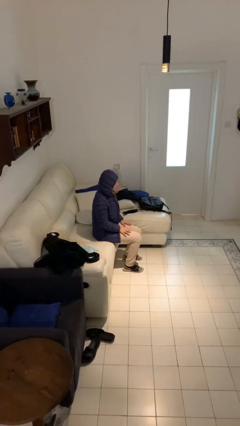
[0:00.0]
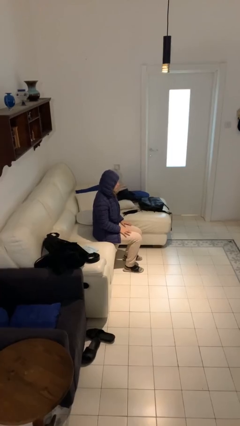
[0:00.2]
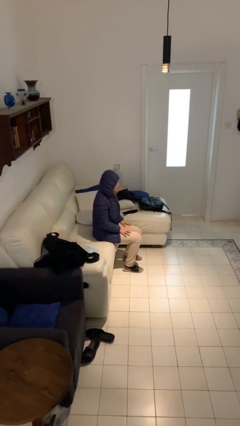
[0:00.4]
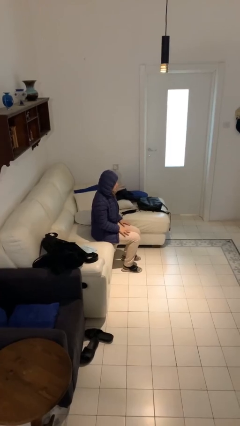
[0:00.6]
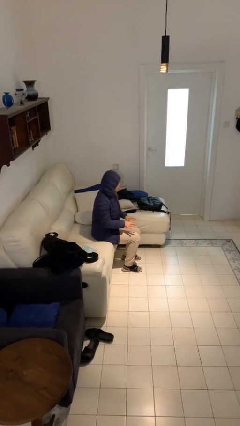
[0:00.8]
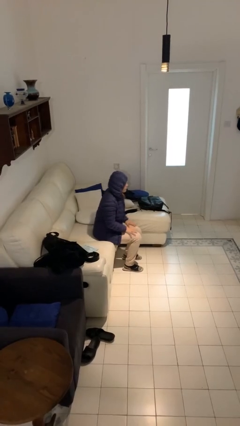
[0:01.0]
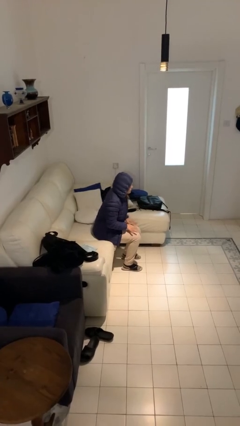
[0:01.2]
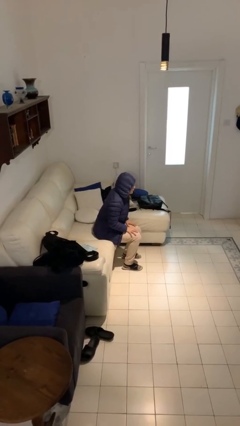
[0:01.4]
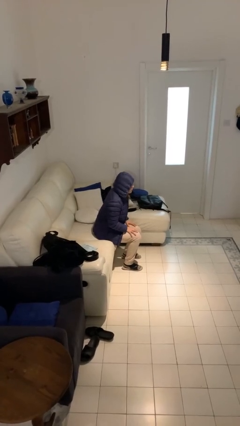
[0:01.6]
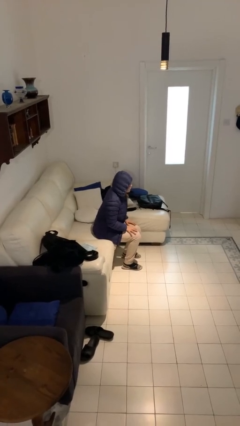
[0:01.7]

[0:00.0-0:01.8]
person slaps hands on thighs

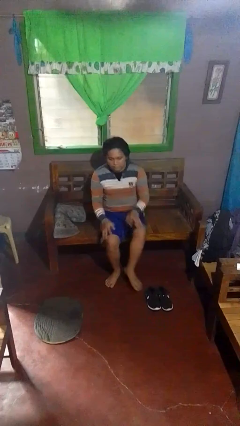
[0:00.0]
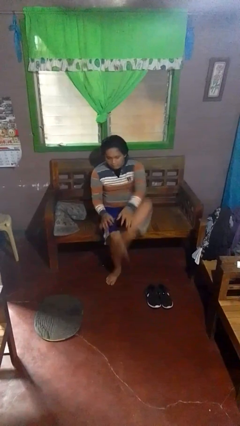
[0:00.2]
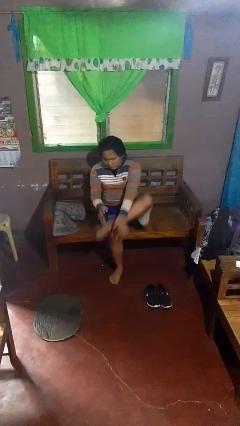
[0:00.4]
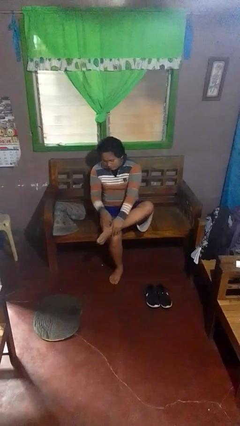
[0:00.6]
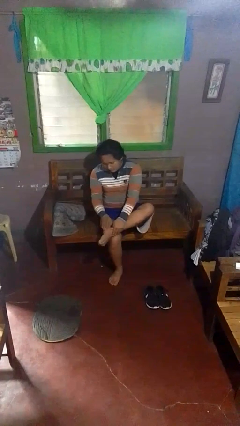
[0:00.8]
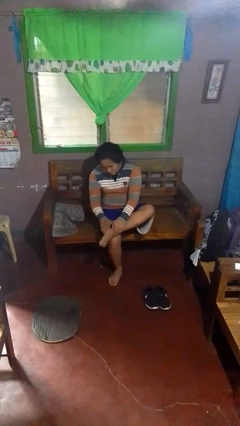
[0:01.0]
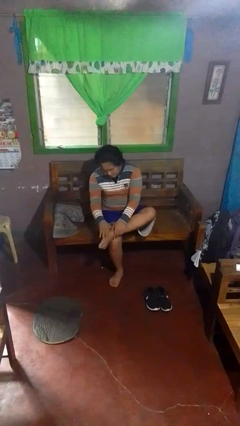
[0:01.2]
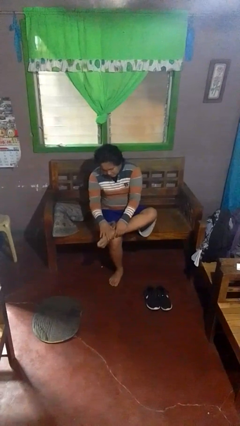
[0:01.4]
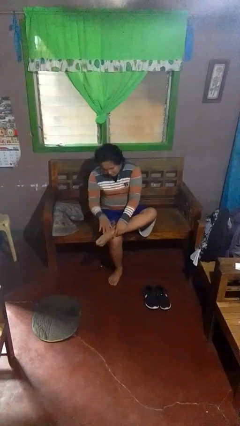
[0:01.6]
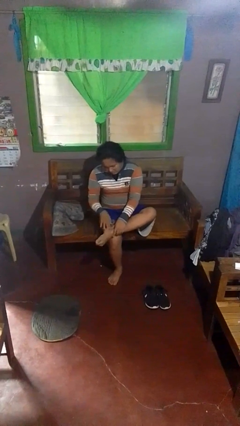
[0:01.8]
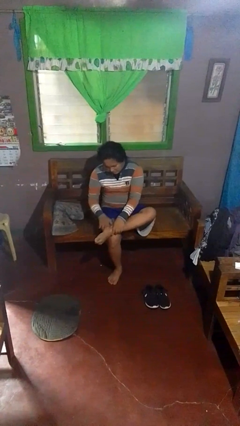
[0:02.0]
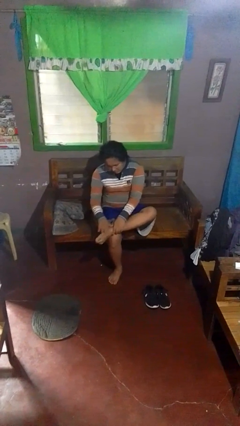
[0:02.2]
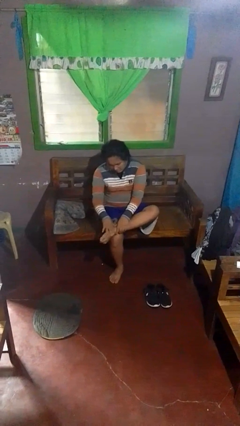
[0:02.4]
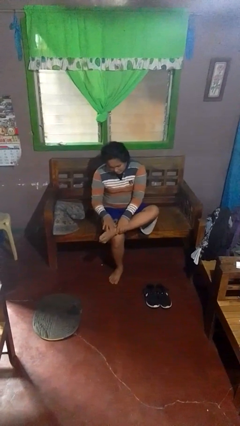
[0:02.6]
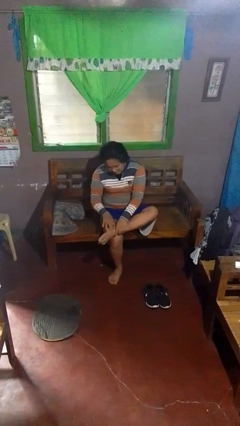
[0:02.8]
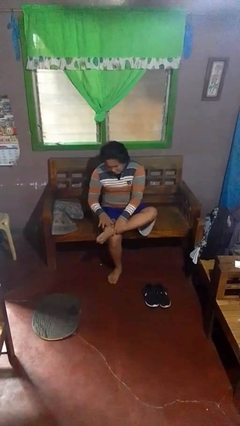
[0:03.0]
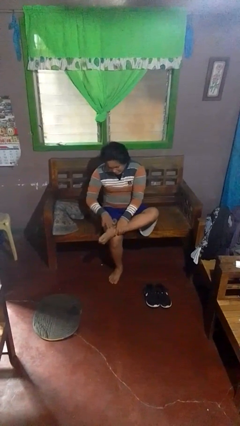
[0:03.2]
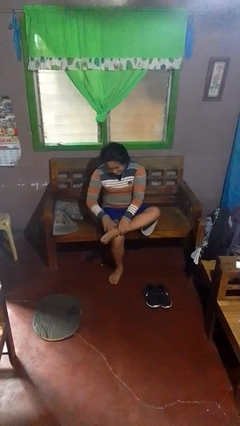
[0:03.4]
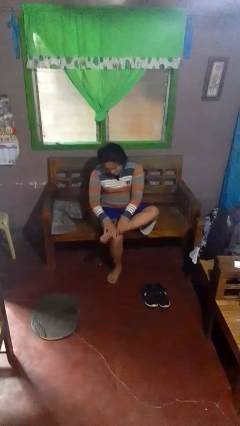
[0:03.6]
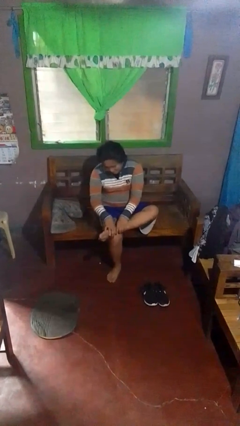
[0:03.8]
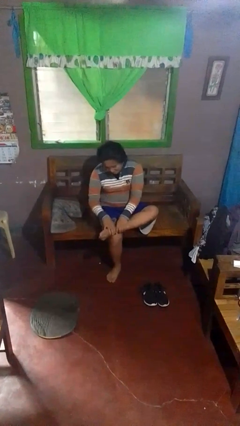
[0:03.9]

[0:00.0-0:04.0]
person rubs foot

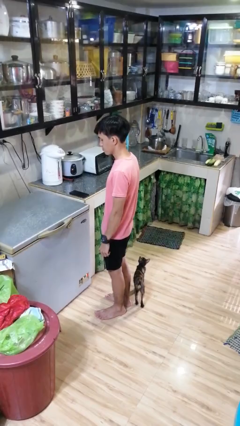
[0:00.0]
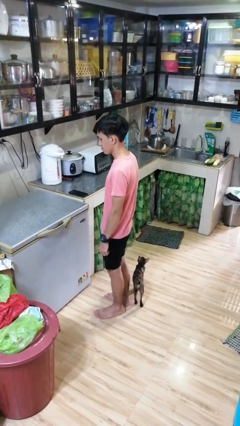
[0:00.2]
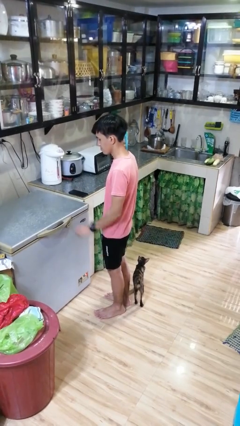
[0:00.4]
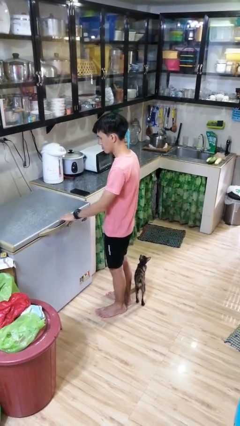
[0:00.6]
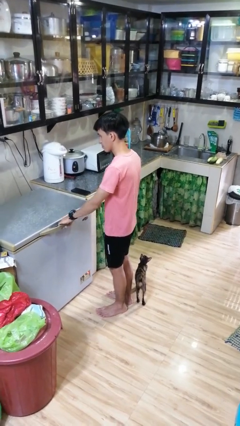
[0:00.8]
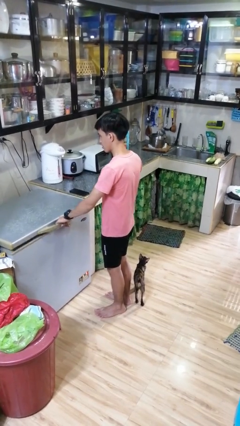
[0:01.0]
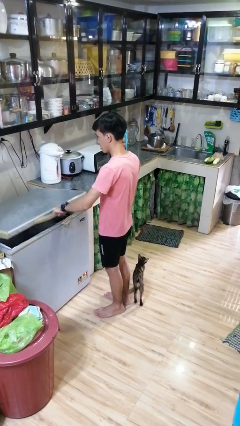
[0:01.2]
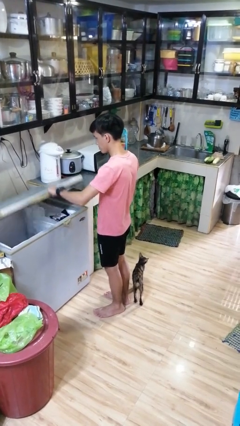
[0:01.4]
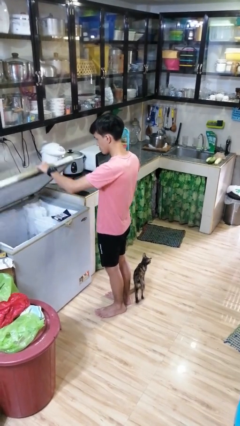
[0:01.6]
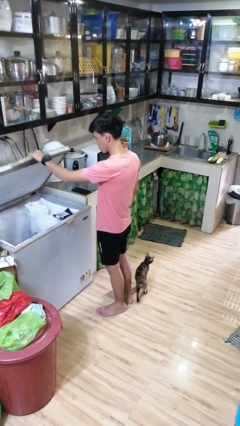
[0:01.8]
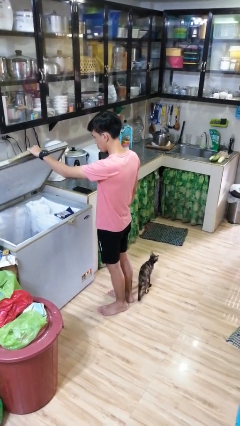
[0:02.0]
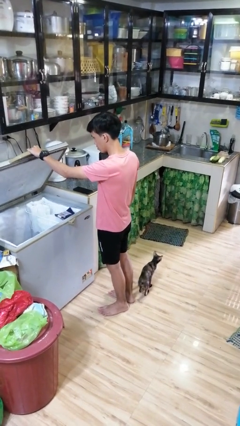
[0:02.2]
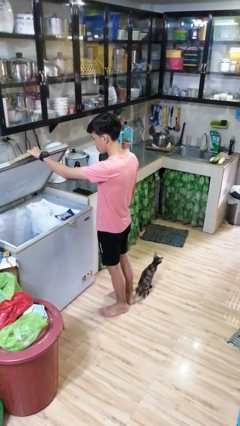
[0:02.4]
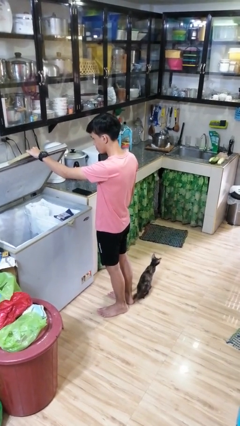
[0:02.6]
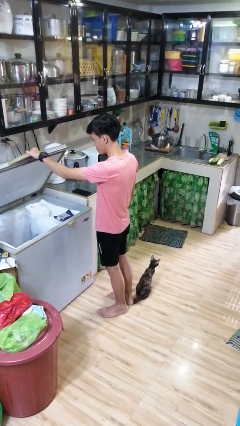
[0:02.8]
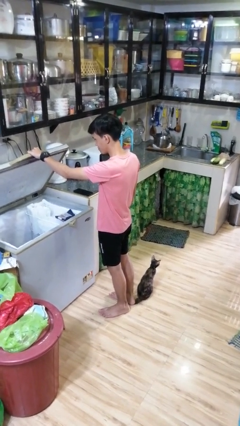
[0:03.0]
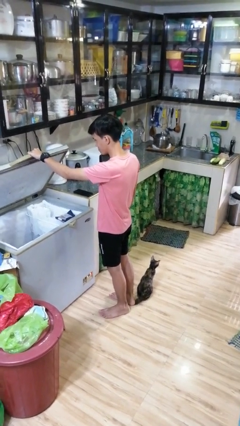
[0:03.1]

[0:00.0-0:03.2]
person opens refrigerator

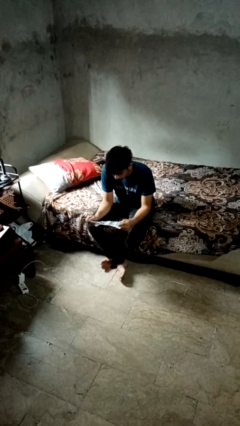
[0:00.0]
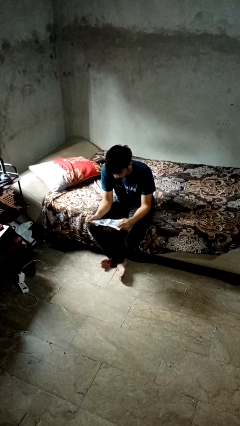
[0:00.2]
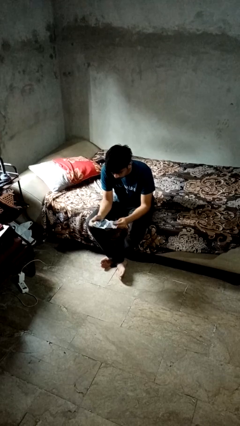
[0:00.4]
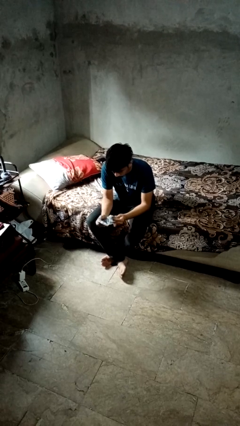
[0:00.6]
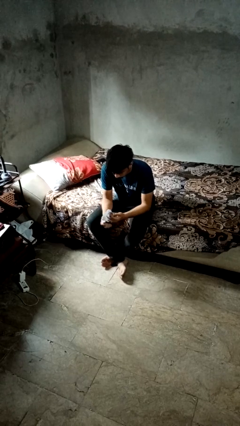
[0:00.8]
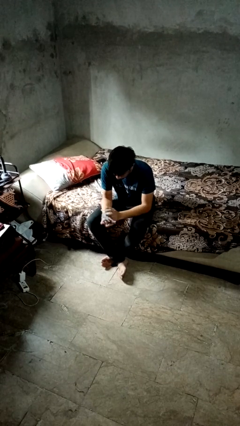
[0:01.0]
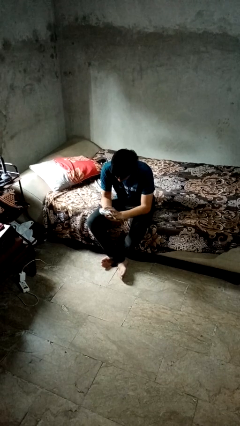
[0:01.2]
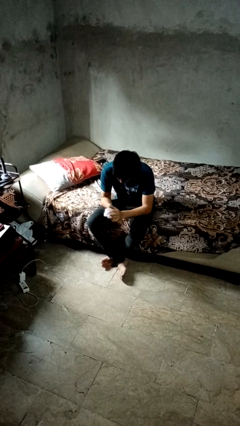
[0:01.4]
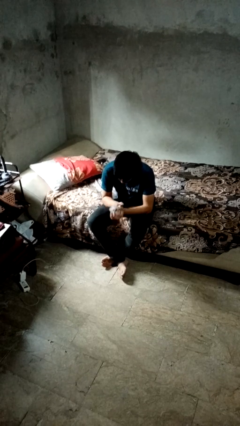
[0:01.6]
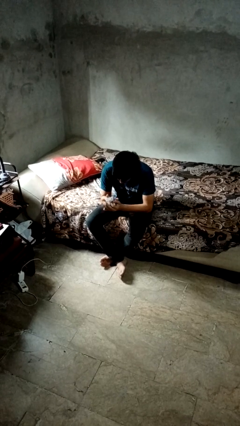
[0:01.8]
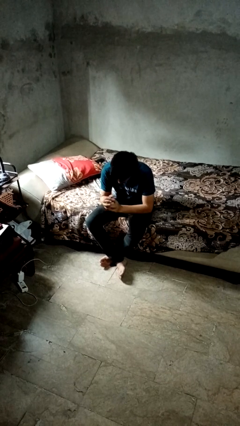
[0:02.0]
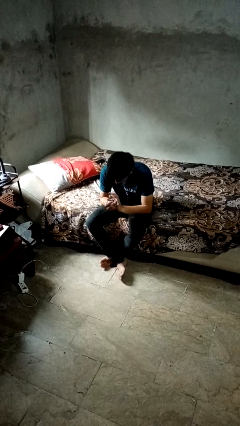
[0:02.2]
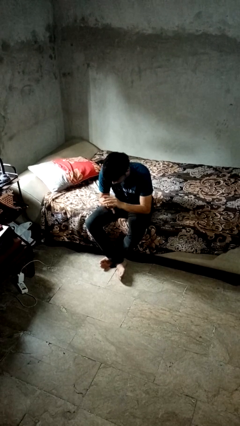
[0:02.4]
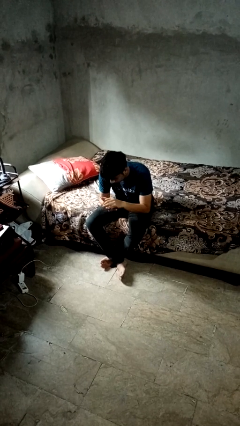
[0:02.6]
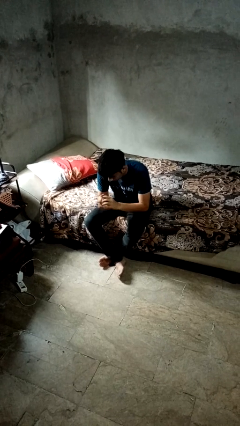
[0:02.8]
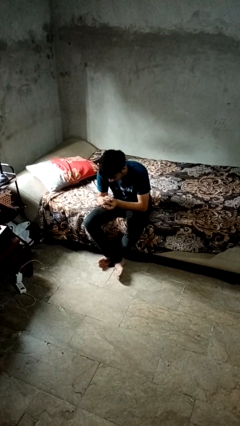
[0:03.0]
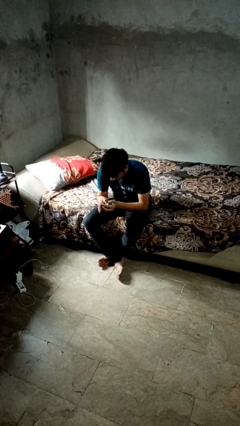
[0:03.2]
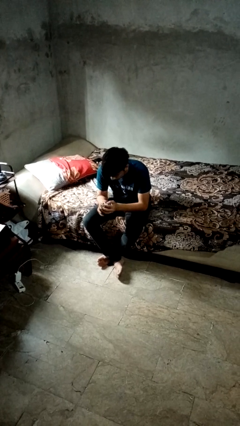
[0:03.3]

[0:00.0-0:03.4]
person crumples paper

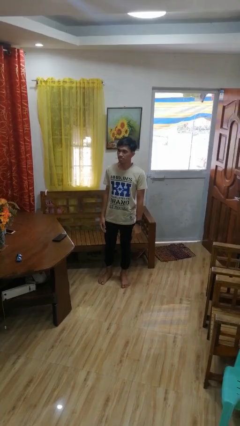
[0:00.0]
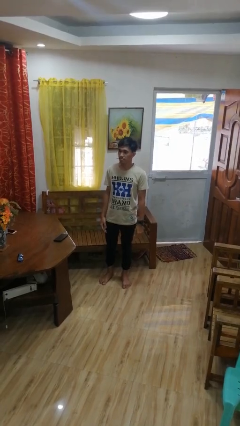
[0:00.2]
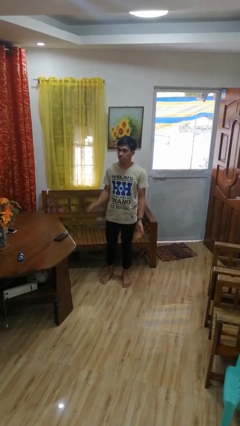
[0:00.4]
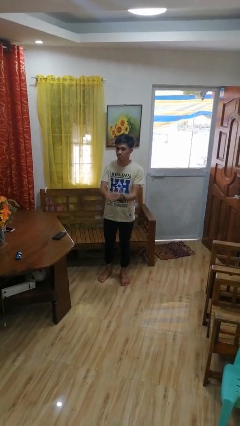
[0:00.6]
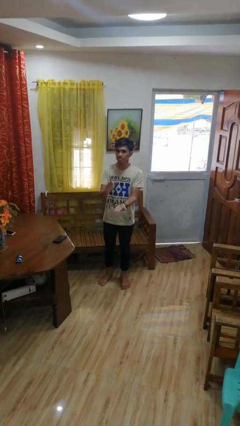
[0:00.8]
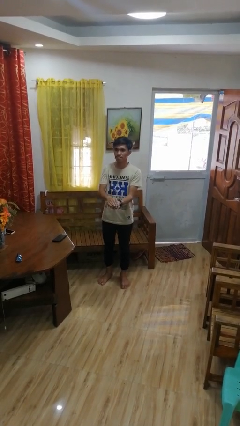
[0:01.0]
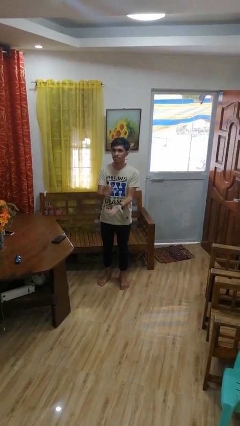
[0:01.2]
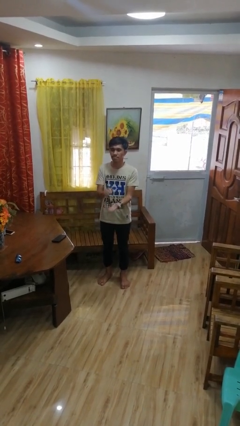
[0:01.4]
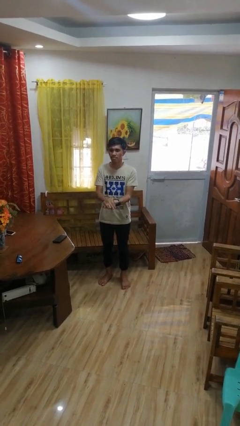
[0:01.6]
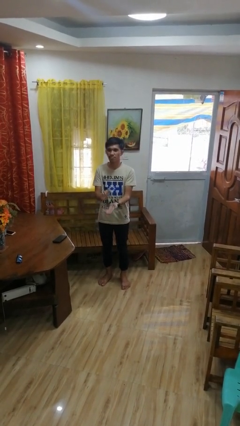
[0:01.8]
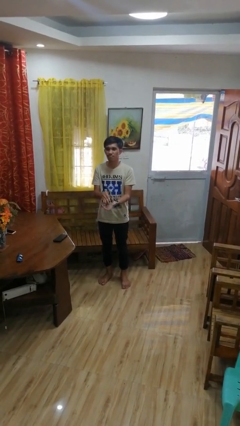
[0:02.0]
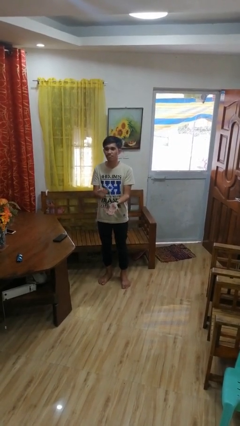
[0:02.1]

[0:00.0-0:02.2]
person claps hands

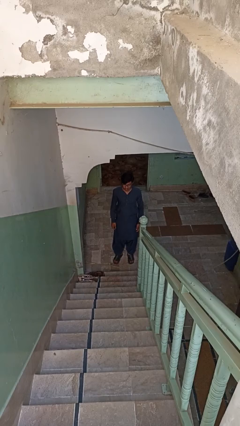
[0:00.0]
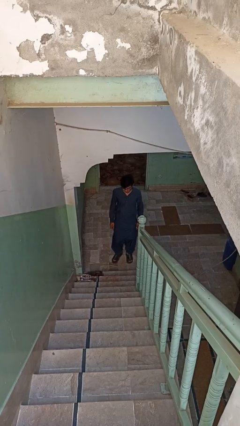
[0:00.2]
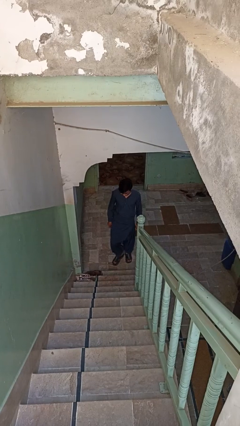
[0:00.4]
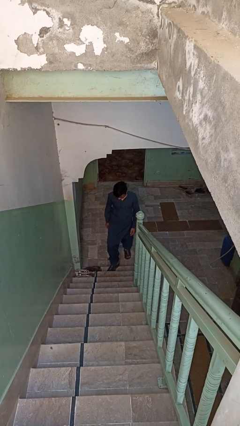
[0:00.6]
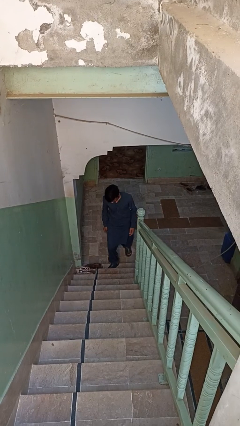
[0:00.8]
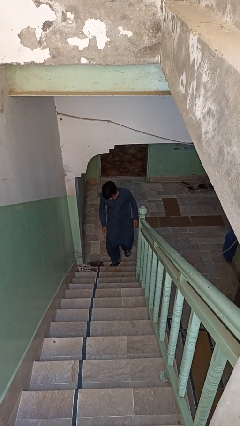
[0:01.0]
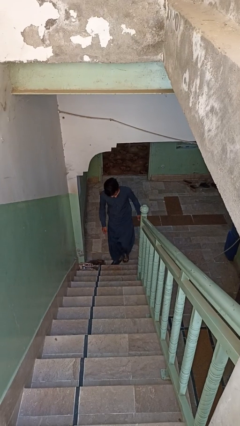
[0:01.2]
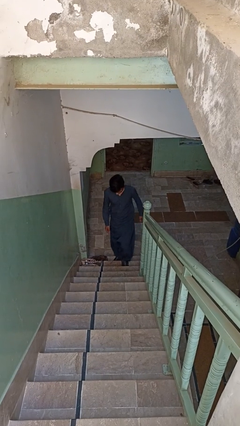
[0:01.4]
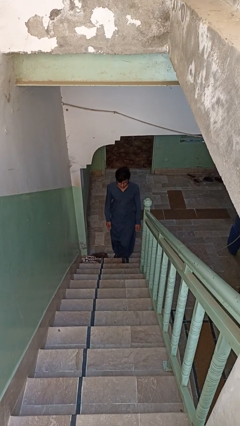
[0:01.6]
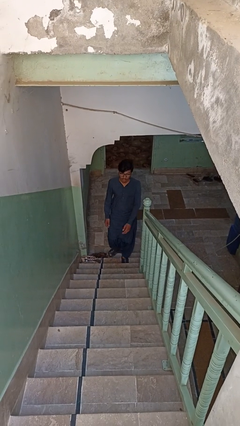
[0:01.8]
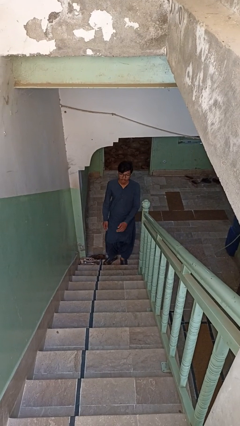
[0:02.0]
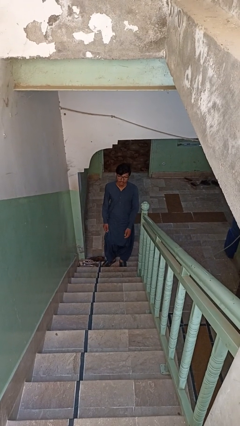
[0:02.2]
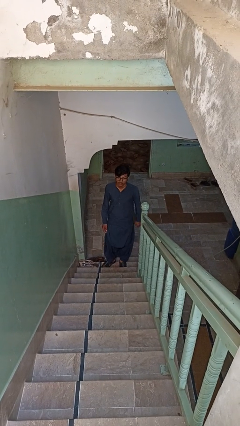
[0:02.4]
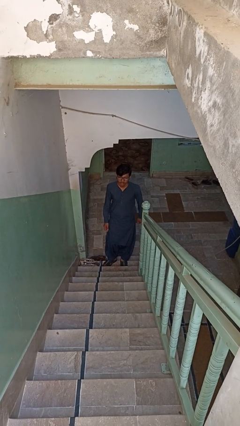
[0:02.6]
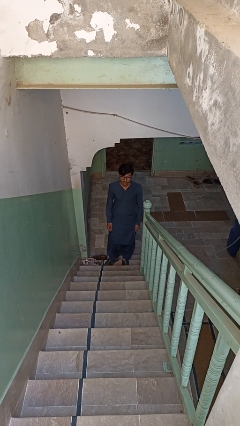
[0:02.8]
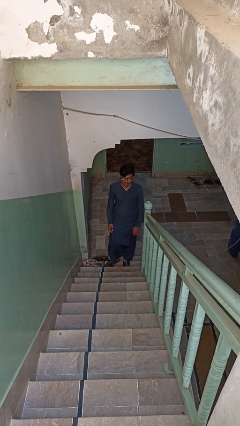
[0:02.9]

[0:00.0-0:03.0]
person climbs up stairs
